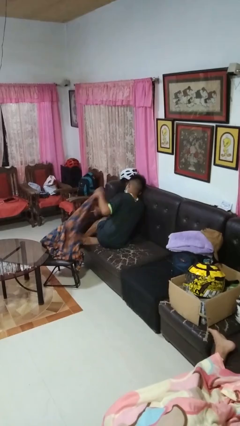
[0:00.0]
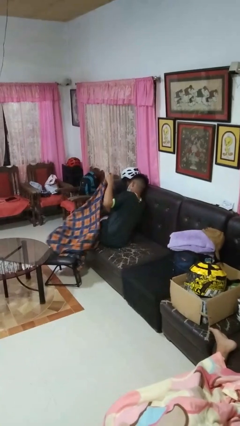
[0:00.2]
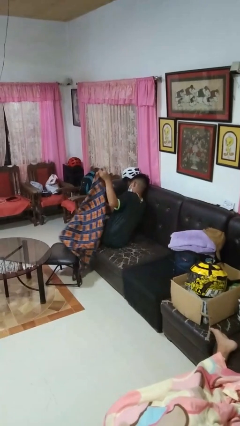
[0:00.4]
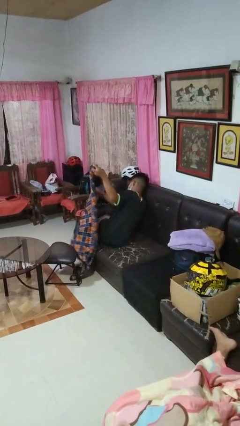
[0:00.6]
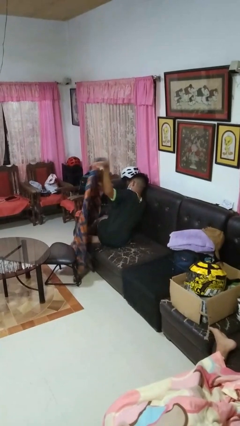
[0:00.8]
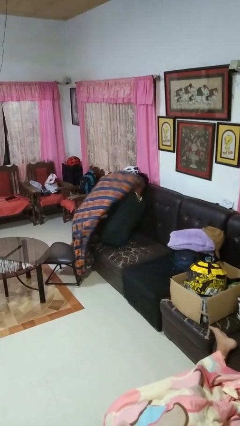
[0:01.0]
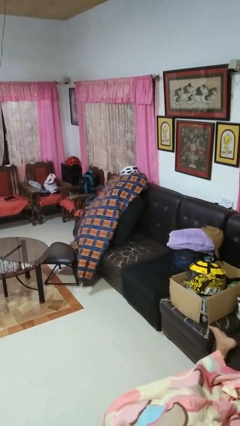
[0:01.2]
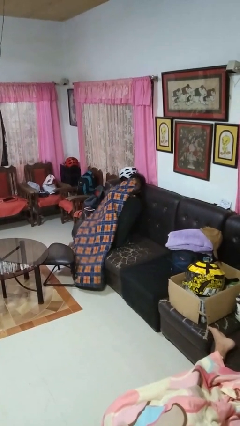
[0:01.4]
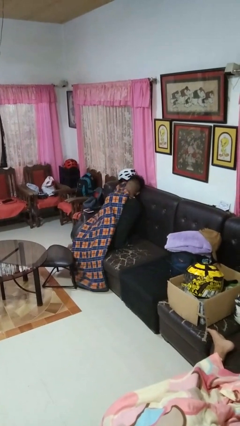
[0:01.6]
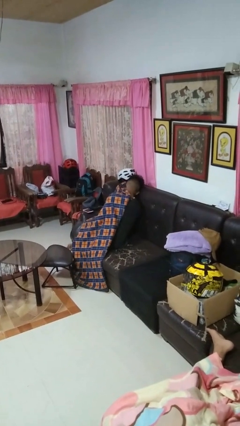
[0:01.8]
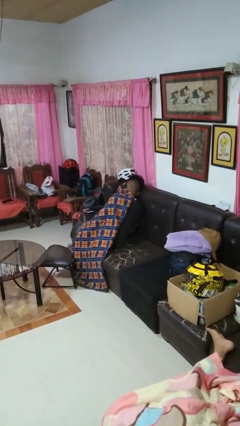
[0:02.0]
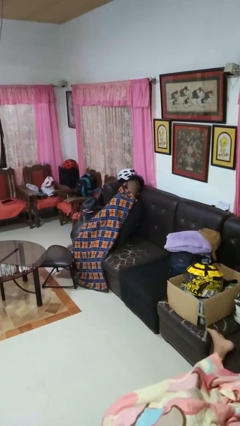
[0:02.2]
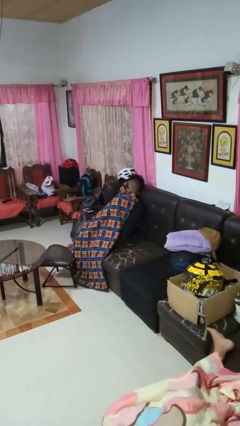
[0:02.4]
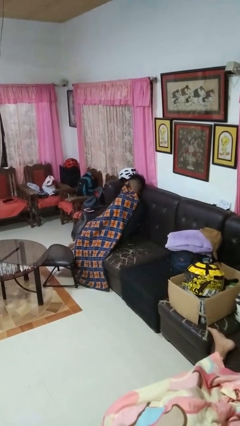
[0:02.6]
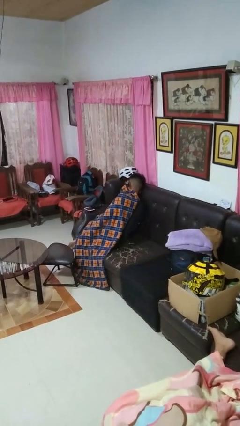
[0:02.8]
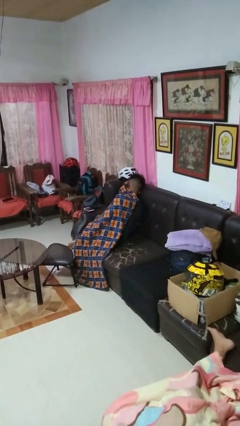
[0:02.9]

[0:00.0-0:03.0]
person covers with blanket

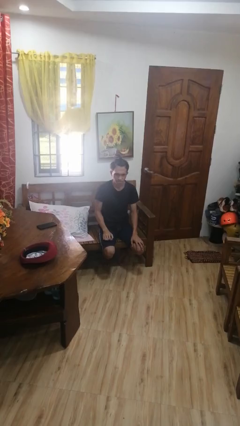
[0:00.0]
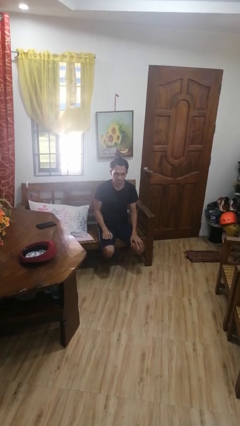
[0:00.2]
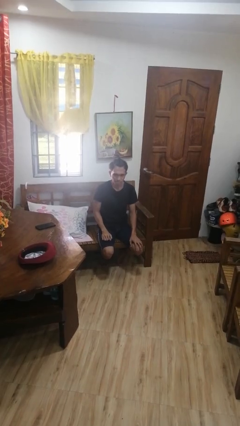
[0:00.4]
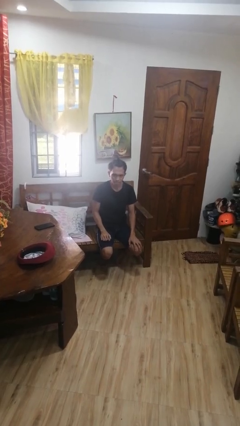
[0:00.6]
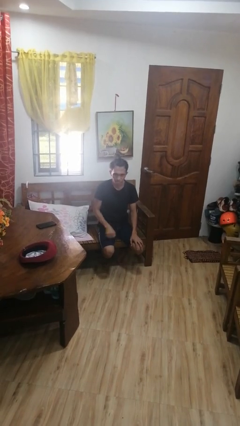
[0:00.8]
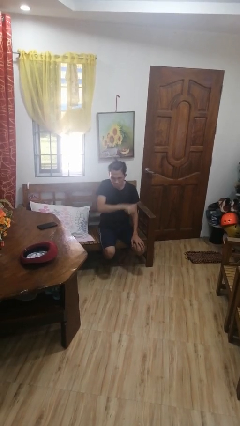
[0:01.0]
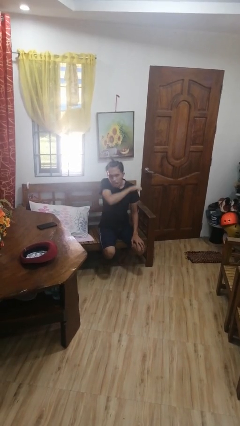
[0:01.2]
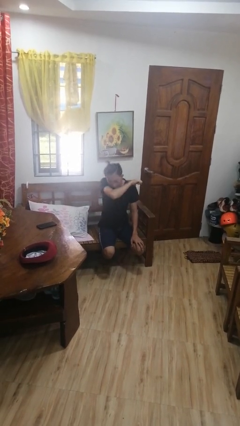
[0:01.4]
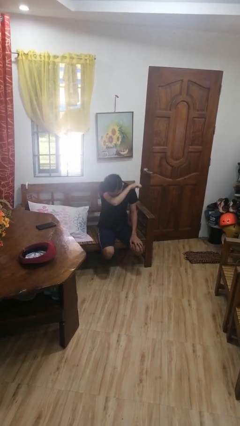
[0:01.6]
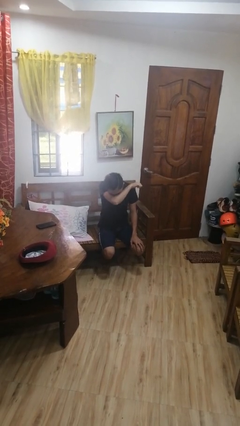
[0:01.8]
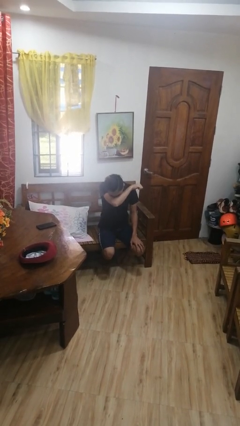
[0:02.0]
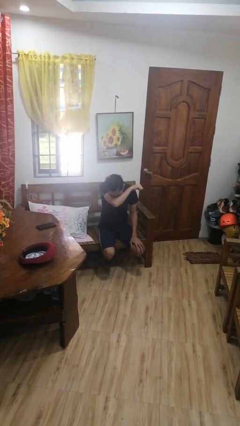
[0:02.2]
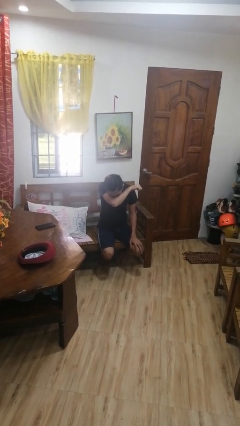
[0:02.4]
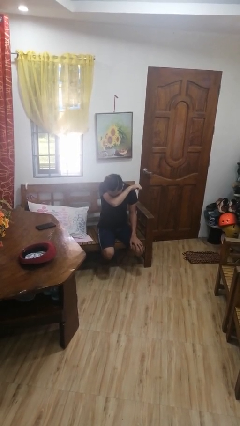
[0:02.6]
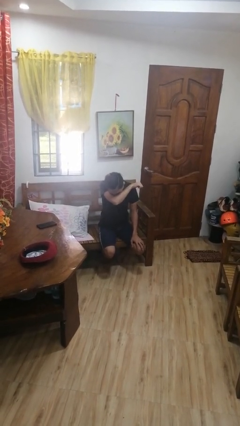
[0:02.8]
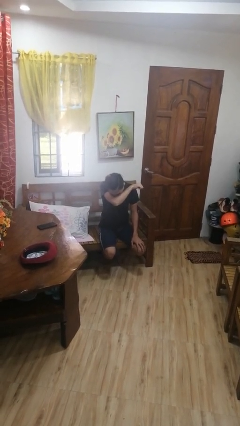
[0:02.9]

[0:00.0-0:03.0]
person sneezes into arm

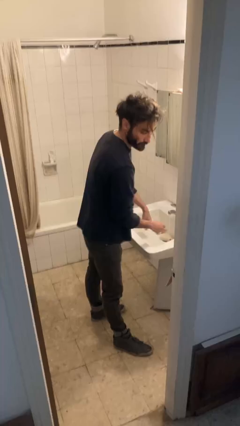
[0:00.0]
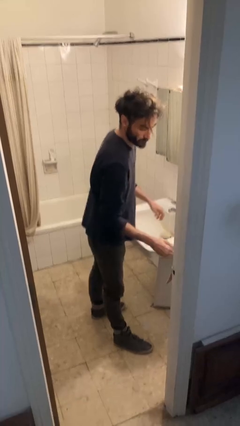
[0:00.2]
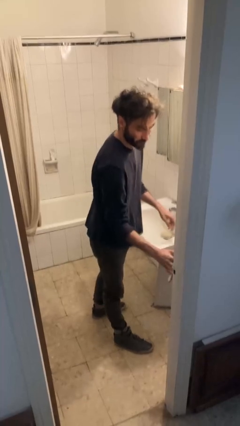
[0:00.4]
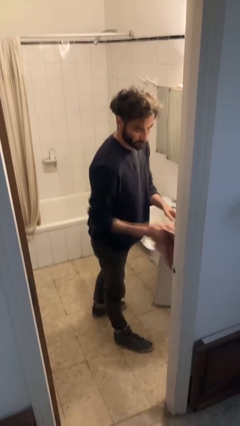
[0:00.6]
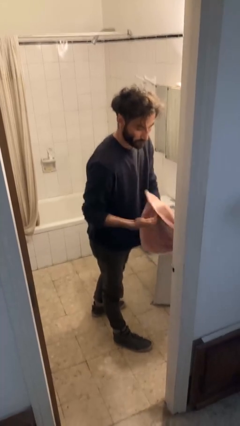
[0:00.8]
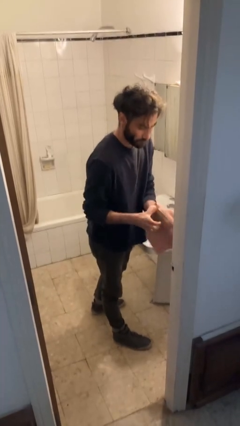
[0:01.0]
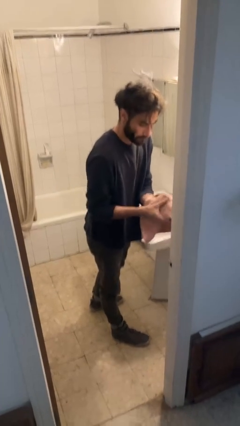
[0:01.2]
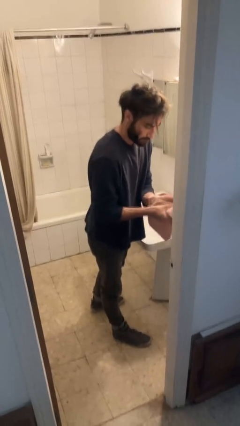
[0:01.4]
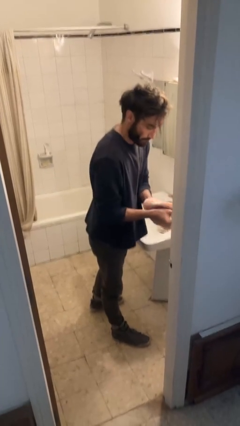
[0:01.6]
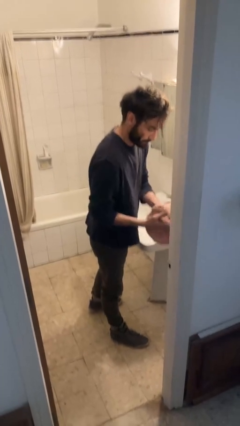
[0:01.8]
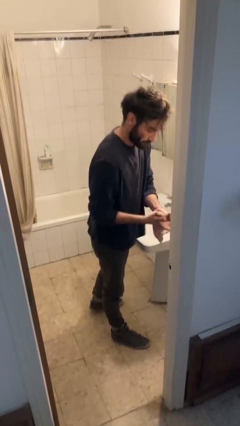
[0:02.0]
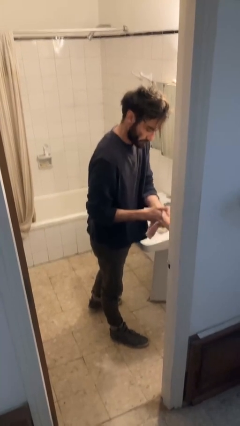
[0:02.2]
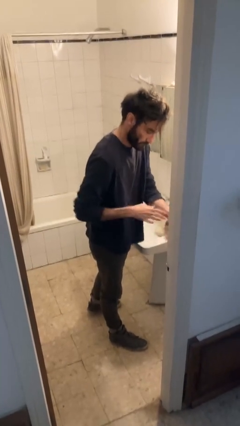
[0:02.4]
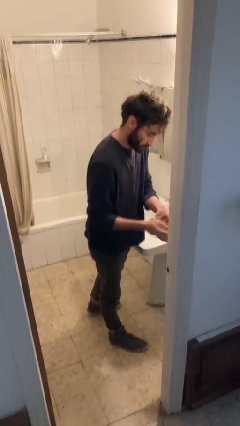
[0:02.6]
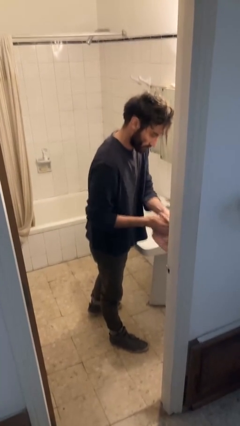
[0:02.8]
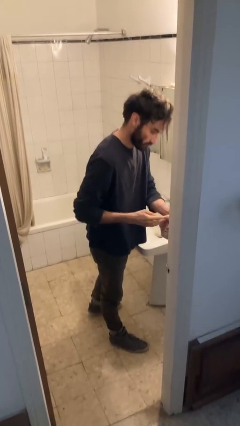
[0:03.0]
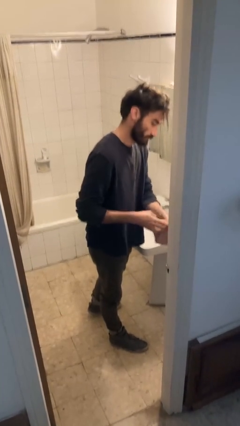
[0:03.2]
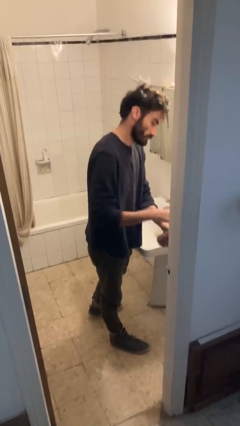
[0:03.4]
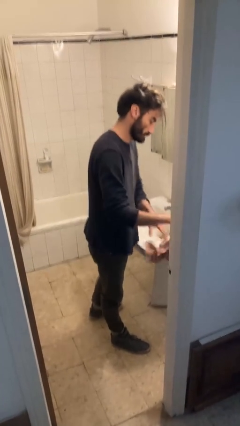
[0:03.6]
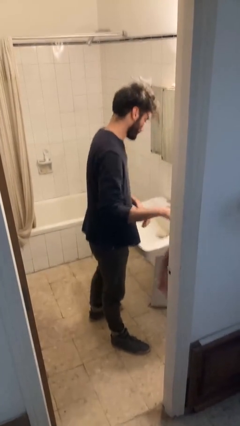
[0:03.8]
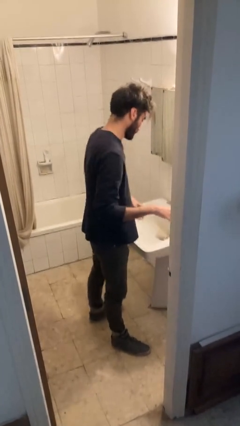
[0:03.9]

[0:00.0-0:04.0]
person dries hands with towel

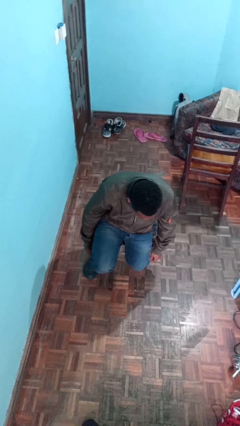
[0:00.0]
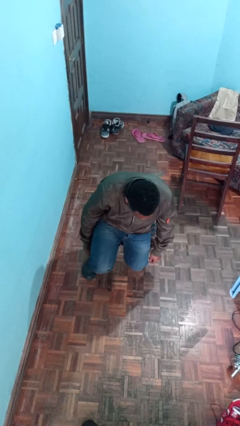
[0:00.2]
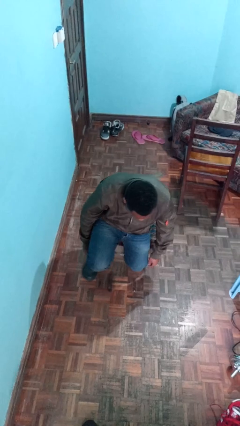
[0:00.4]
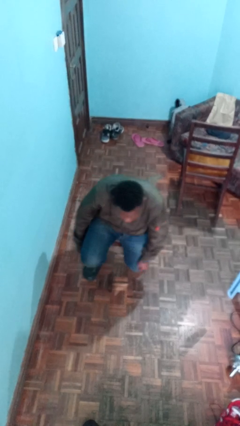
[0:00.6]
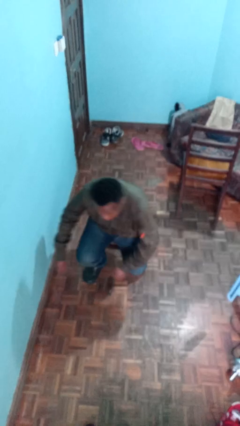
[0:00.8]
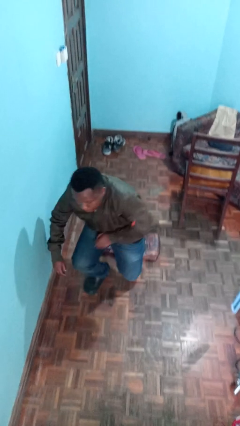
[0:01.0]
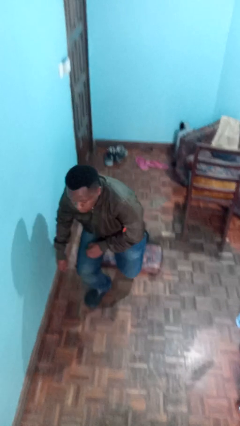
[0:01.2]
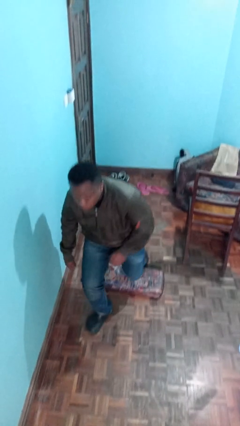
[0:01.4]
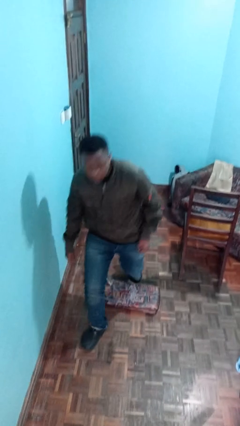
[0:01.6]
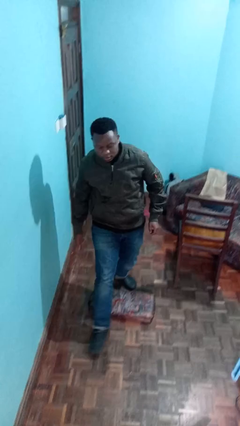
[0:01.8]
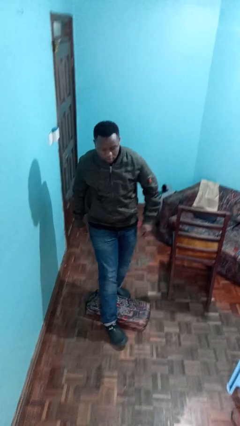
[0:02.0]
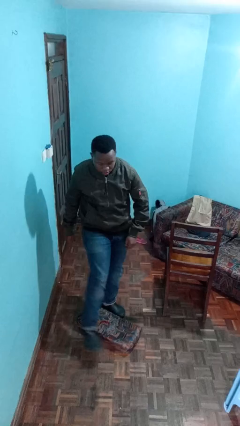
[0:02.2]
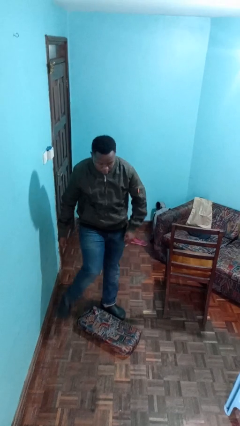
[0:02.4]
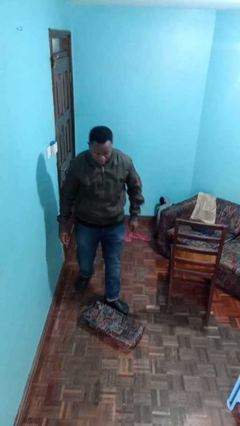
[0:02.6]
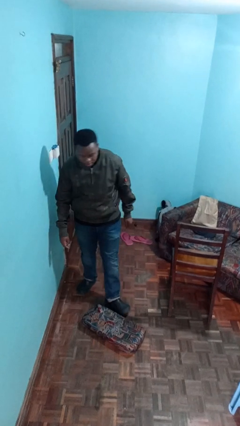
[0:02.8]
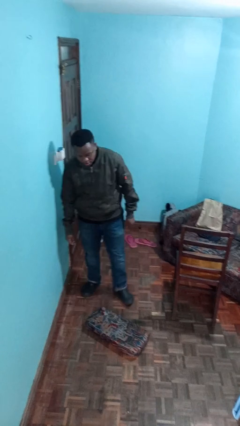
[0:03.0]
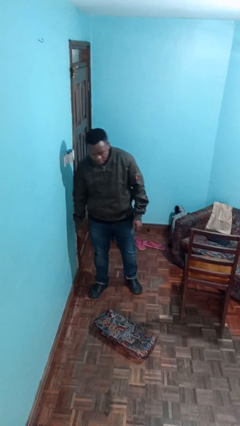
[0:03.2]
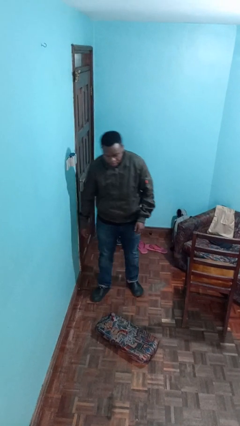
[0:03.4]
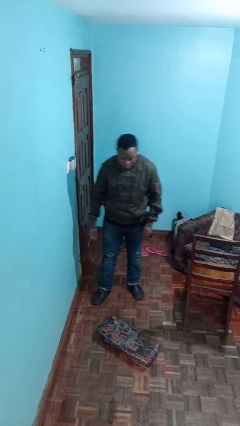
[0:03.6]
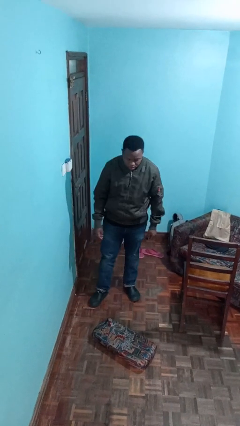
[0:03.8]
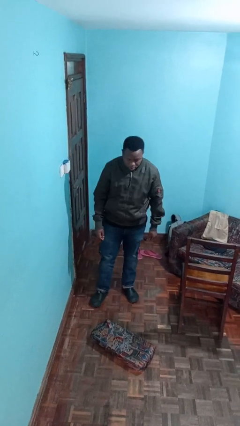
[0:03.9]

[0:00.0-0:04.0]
person stands up from floor

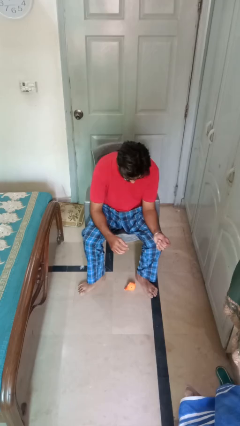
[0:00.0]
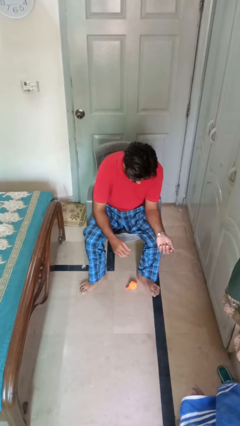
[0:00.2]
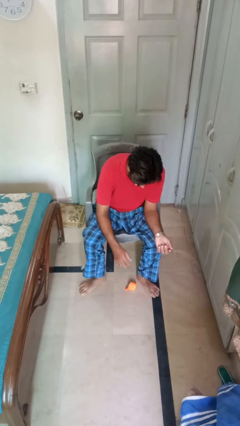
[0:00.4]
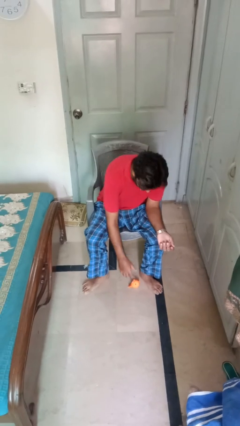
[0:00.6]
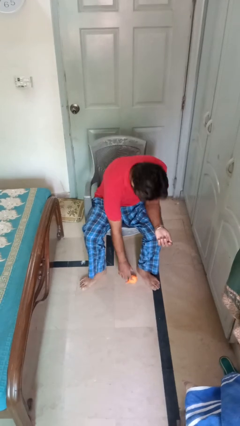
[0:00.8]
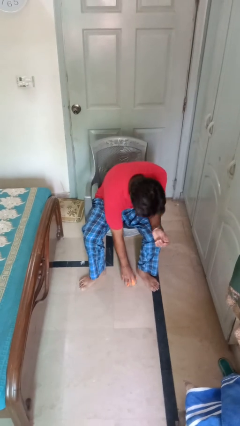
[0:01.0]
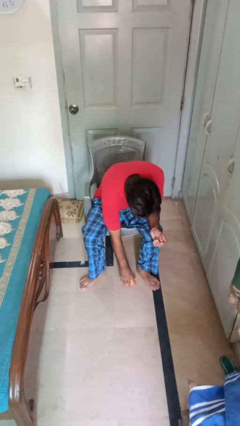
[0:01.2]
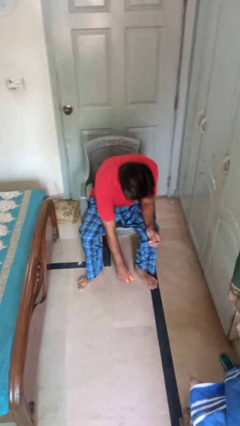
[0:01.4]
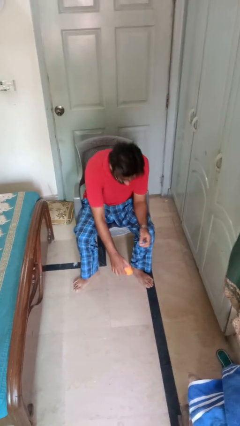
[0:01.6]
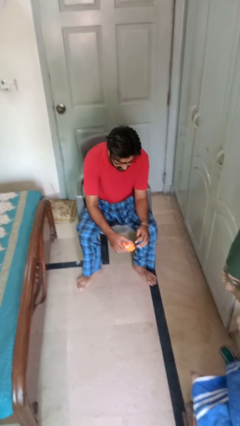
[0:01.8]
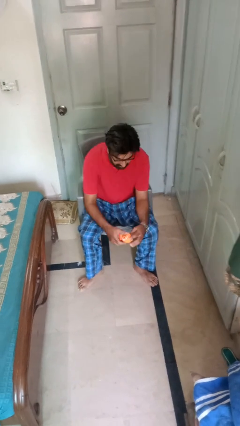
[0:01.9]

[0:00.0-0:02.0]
person picks up object from floor

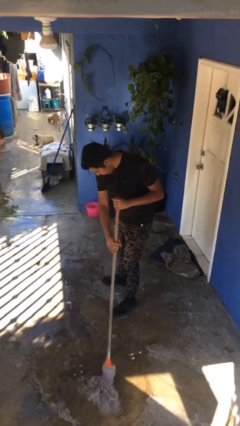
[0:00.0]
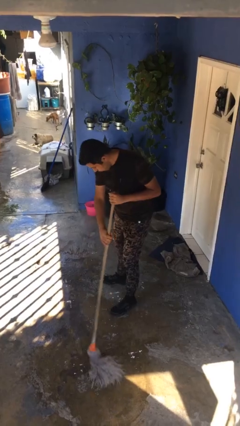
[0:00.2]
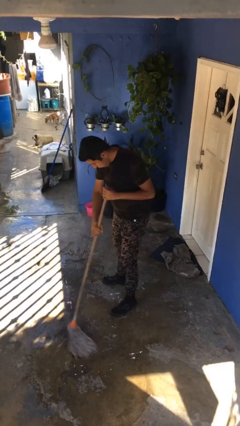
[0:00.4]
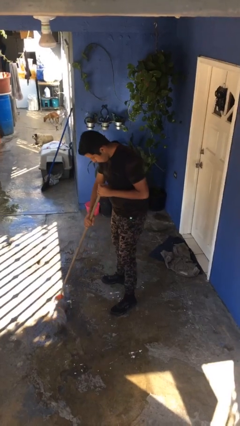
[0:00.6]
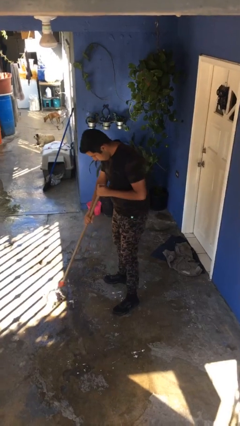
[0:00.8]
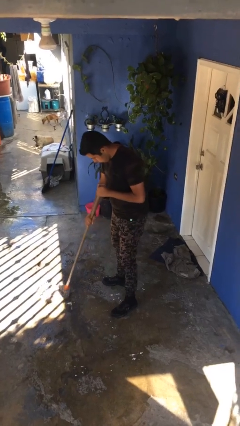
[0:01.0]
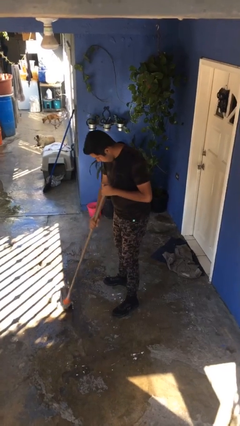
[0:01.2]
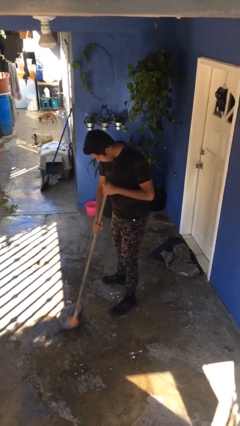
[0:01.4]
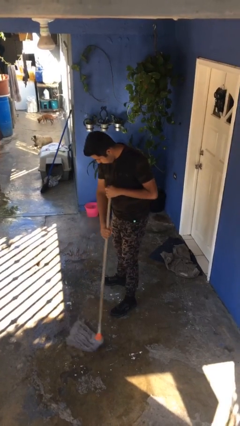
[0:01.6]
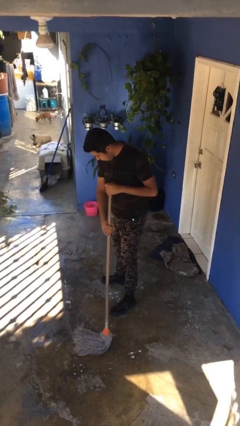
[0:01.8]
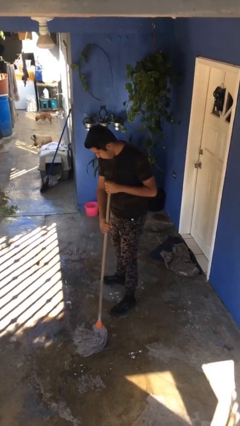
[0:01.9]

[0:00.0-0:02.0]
person mops
